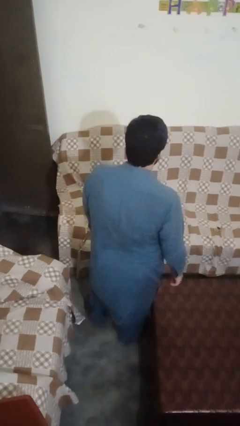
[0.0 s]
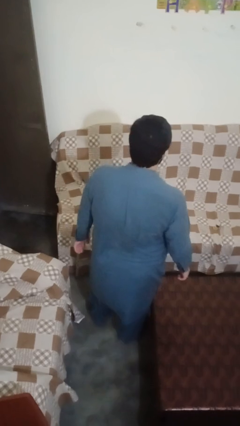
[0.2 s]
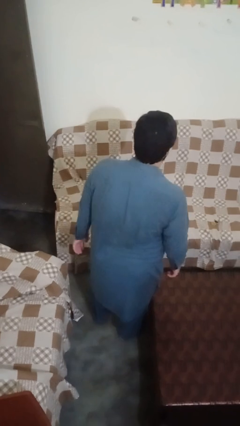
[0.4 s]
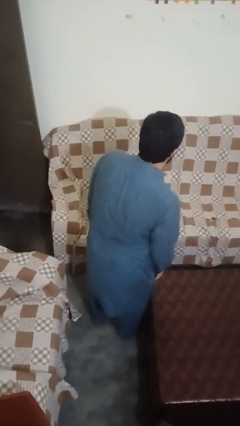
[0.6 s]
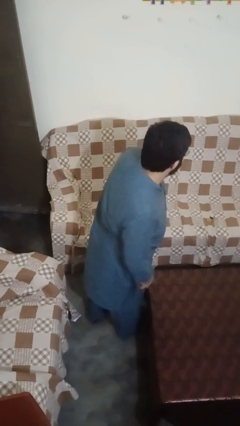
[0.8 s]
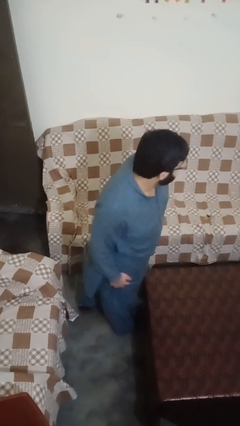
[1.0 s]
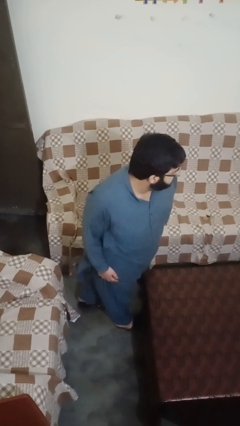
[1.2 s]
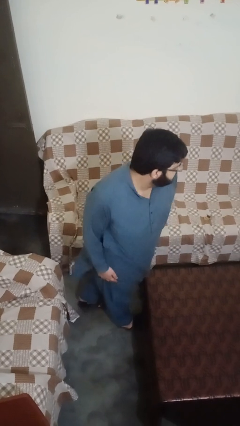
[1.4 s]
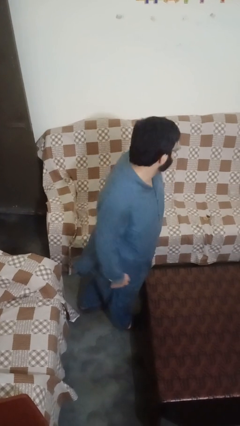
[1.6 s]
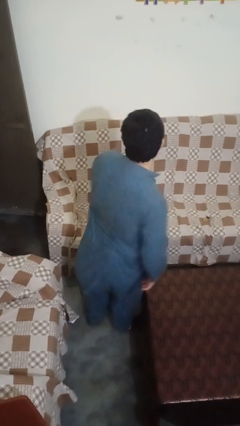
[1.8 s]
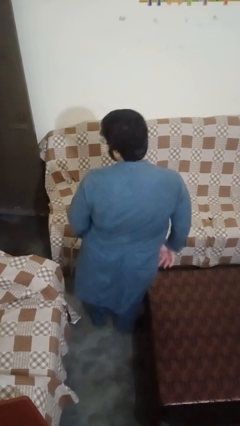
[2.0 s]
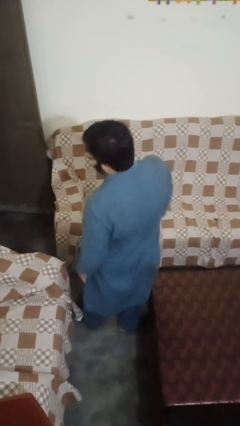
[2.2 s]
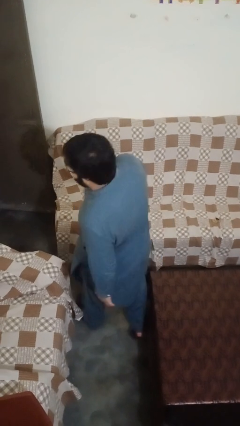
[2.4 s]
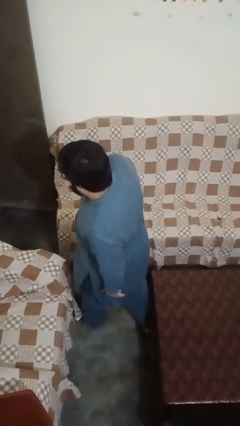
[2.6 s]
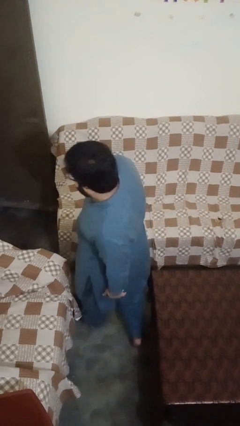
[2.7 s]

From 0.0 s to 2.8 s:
person twirls

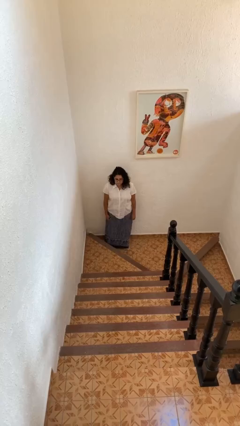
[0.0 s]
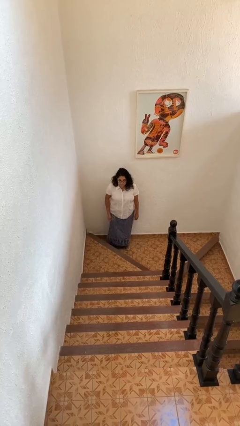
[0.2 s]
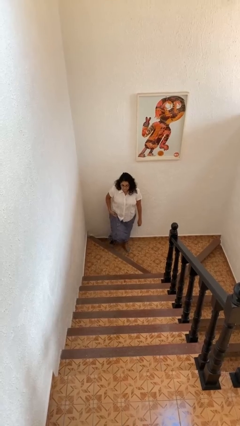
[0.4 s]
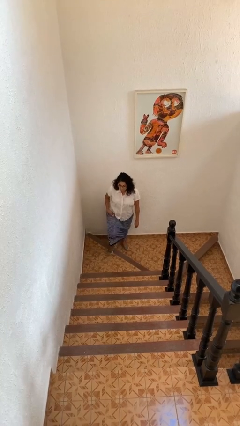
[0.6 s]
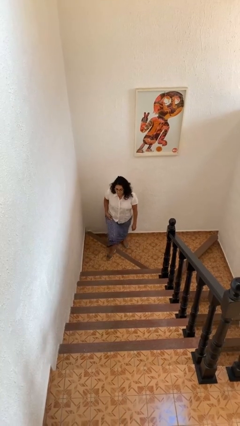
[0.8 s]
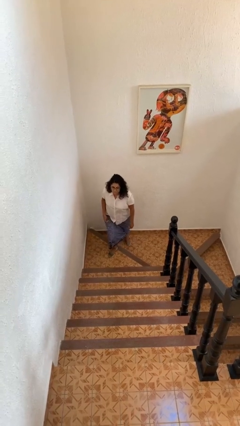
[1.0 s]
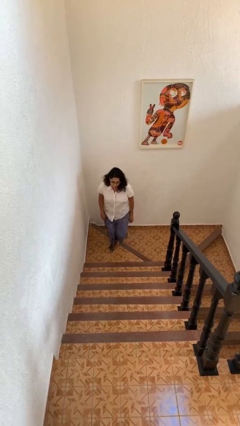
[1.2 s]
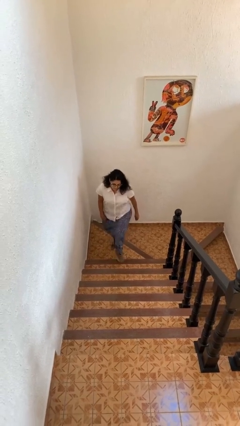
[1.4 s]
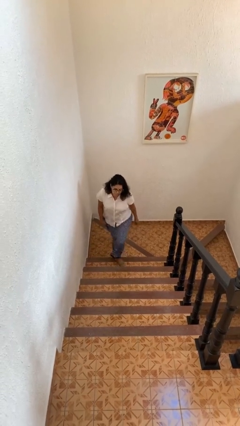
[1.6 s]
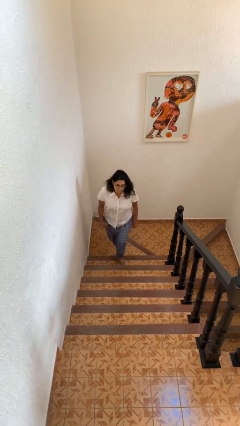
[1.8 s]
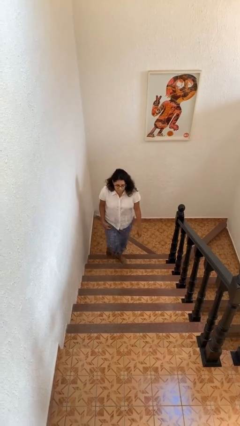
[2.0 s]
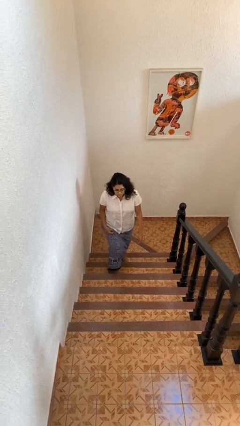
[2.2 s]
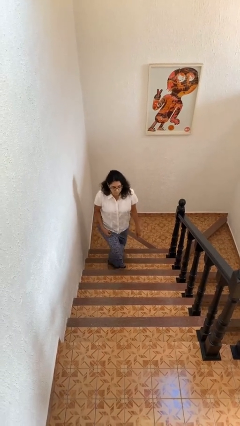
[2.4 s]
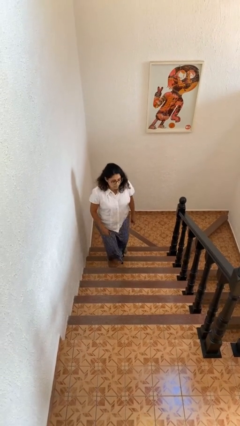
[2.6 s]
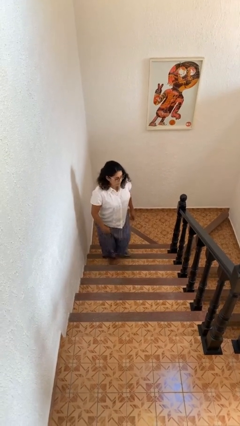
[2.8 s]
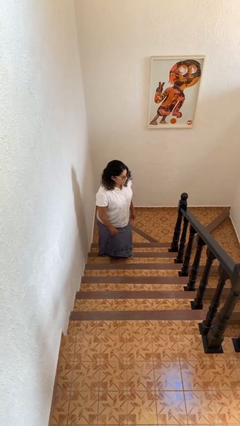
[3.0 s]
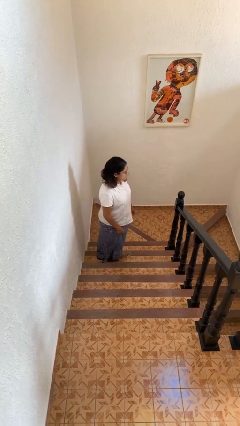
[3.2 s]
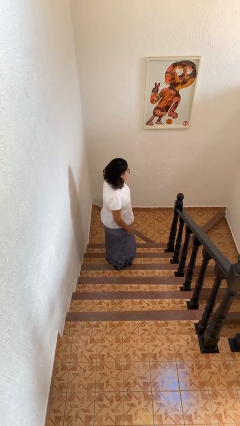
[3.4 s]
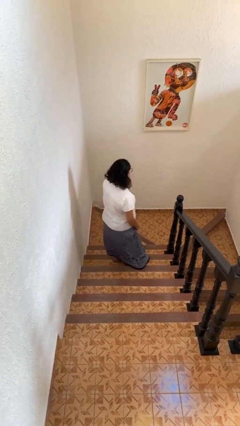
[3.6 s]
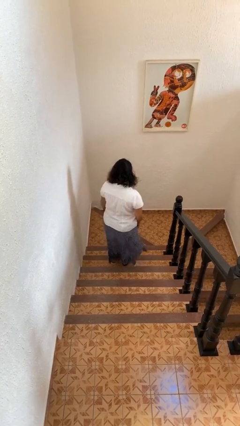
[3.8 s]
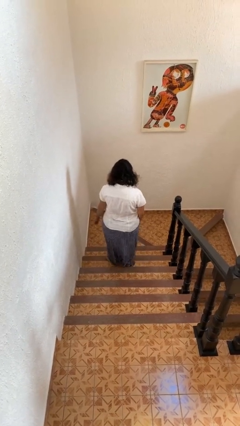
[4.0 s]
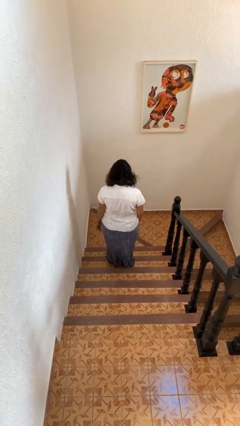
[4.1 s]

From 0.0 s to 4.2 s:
person climbs up stairs

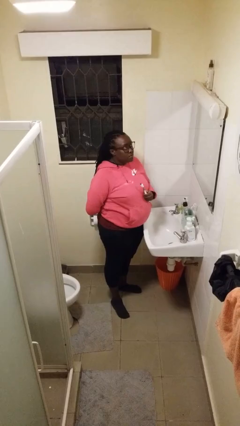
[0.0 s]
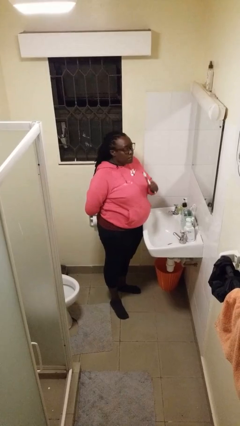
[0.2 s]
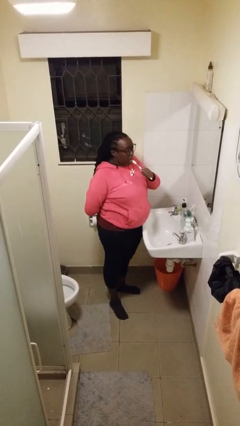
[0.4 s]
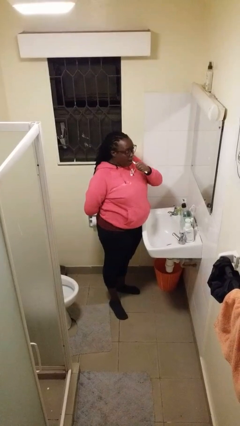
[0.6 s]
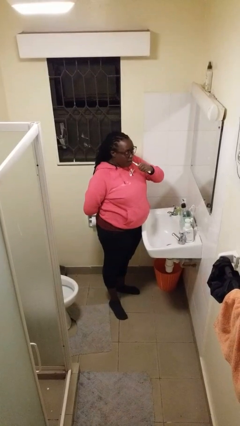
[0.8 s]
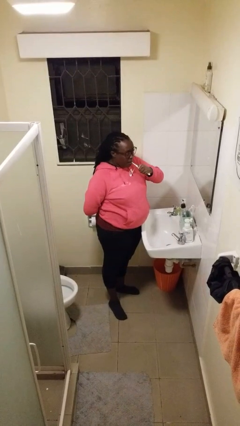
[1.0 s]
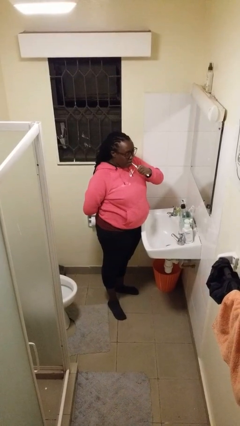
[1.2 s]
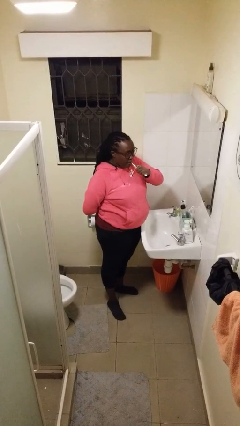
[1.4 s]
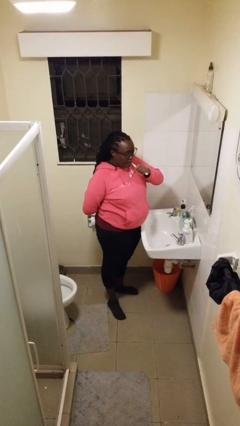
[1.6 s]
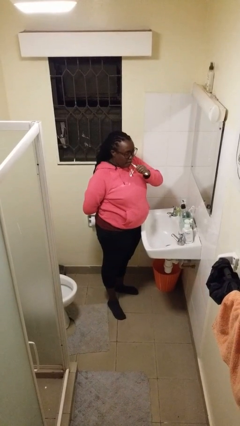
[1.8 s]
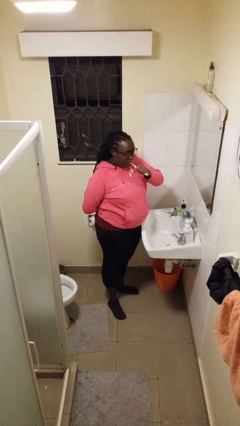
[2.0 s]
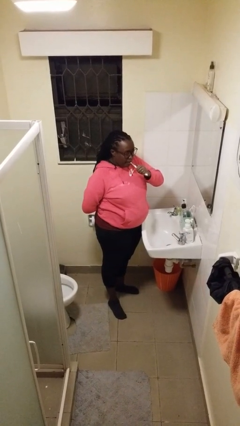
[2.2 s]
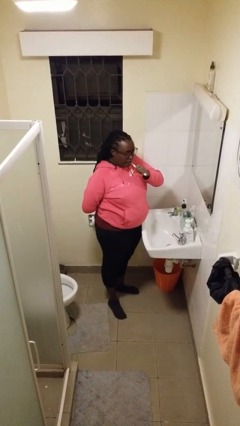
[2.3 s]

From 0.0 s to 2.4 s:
person brushes teeth

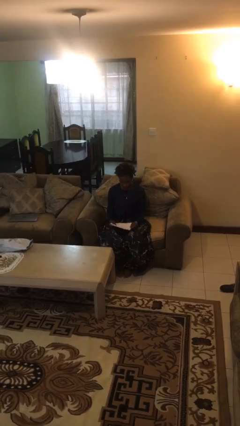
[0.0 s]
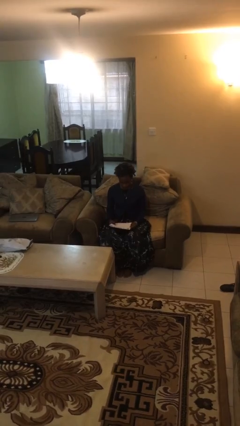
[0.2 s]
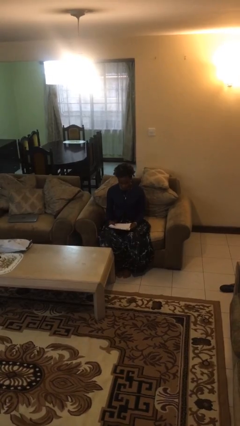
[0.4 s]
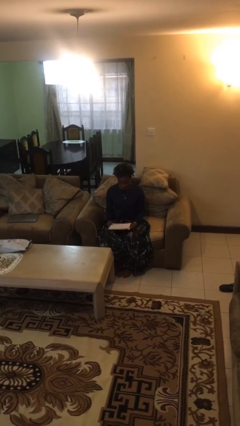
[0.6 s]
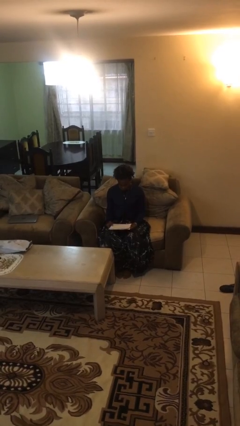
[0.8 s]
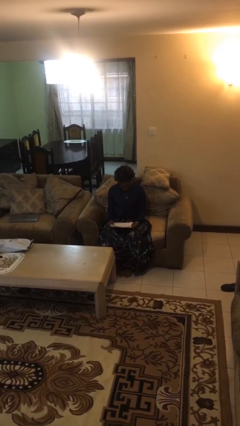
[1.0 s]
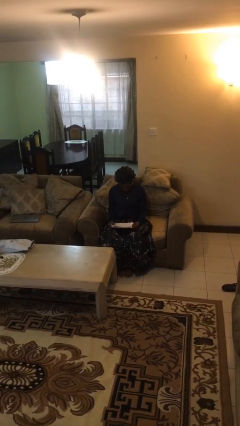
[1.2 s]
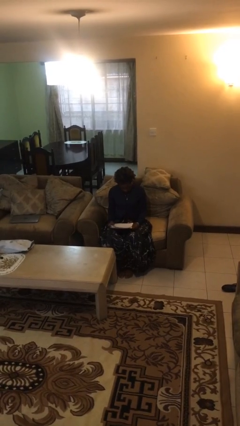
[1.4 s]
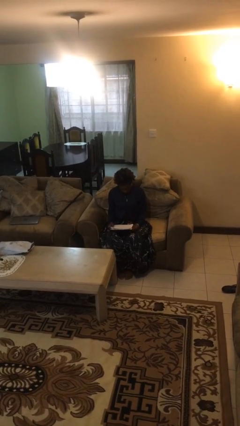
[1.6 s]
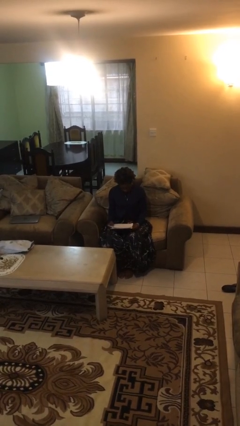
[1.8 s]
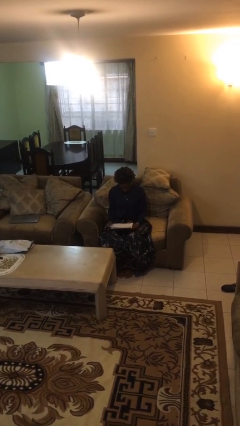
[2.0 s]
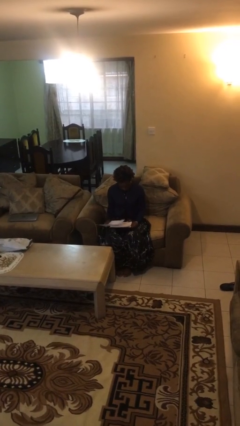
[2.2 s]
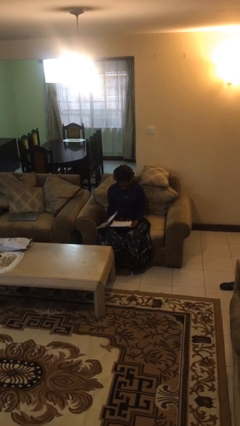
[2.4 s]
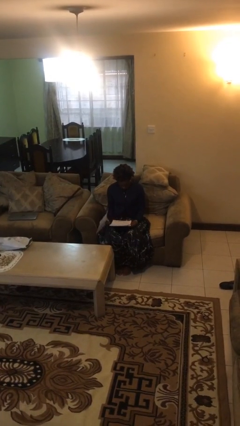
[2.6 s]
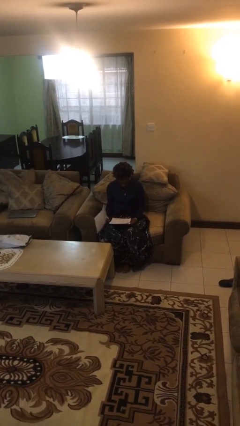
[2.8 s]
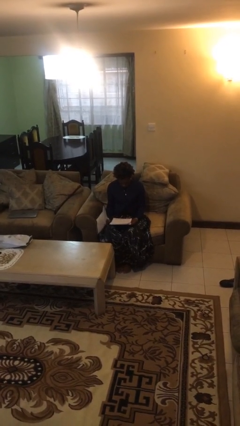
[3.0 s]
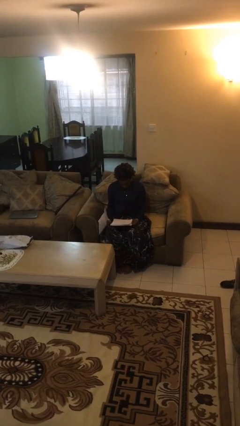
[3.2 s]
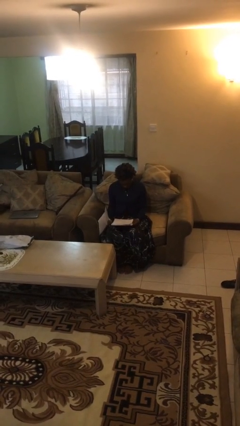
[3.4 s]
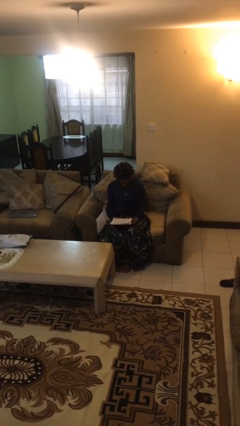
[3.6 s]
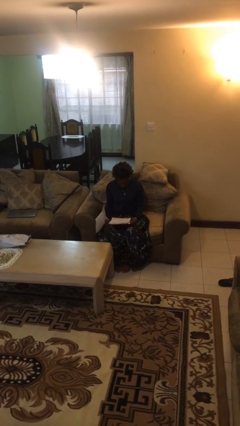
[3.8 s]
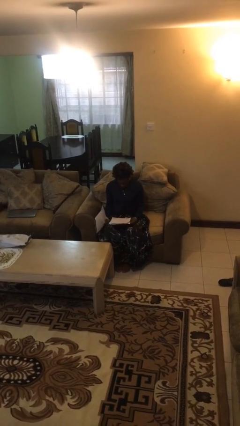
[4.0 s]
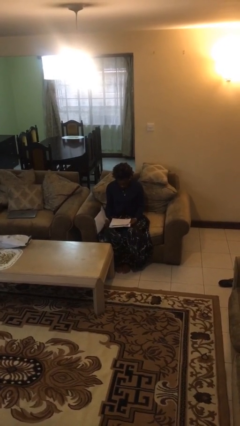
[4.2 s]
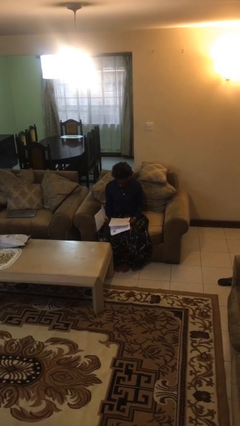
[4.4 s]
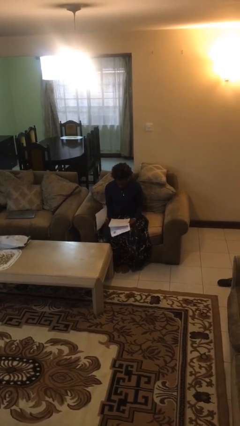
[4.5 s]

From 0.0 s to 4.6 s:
person reads document

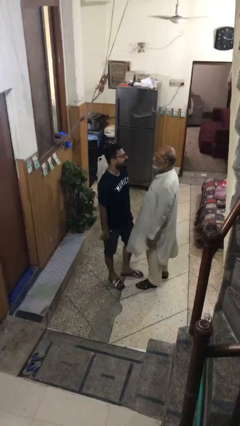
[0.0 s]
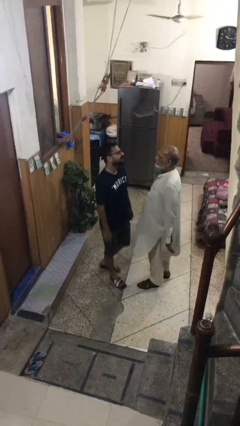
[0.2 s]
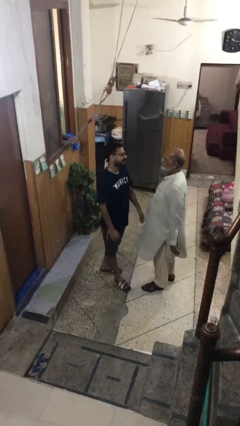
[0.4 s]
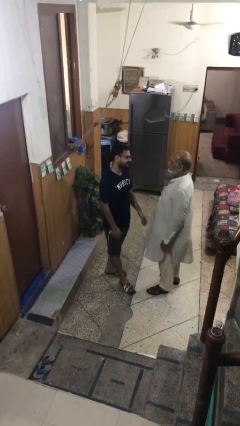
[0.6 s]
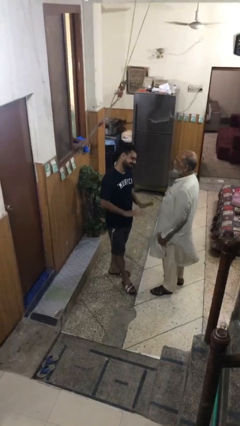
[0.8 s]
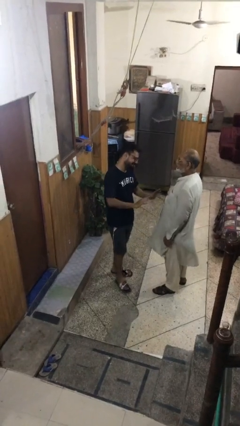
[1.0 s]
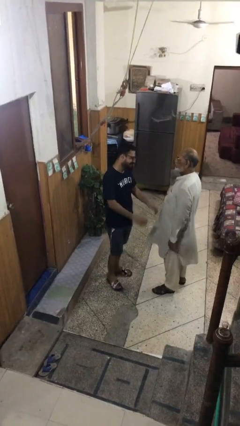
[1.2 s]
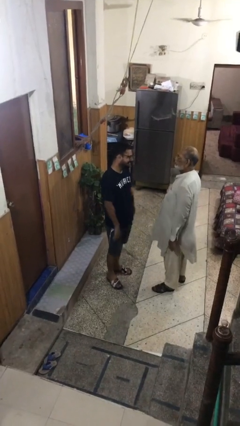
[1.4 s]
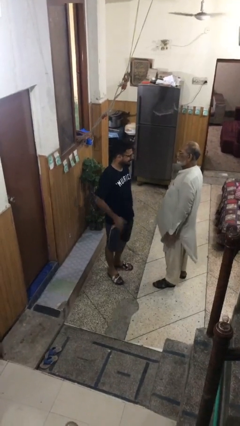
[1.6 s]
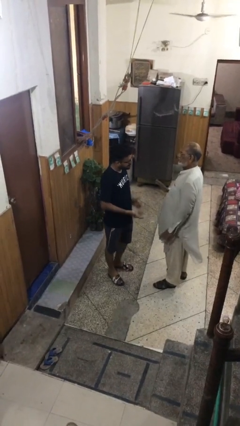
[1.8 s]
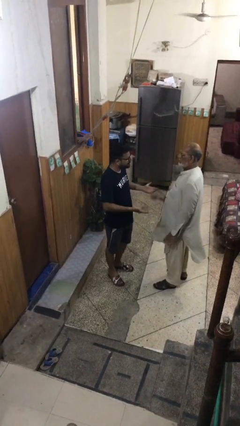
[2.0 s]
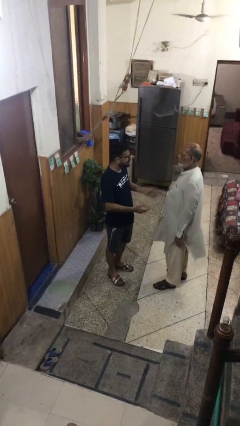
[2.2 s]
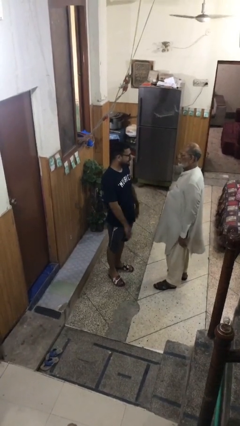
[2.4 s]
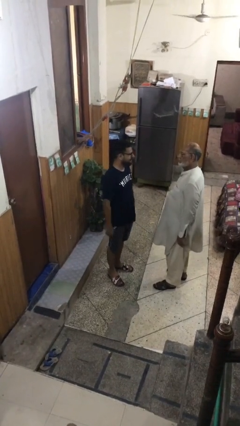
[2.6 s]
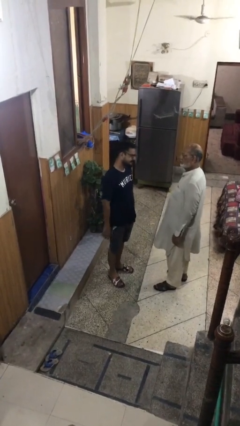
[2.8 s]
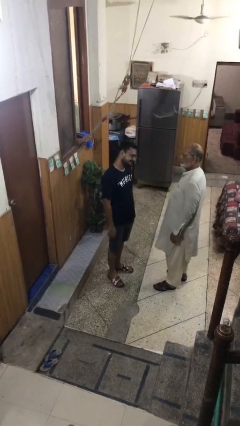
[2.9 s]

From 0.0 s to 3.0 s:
person talks to person

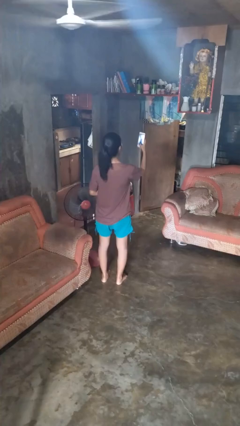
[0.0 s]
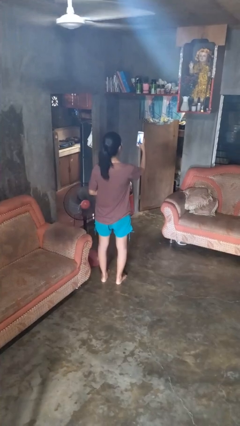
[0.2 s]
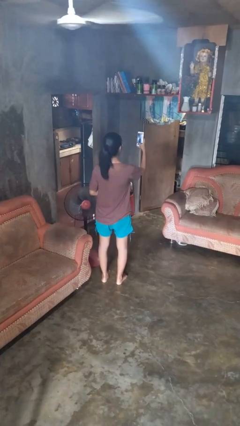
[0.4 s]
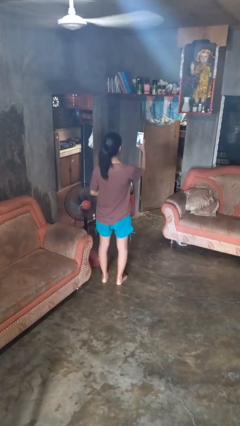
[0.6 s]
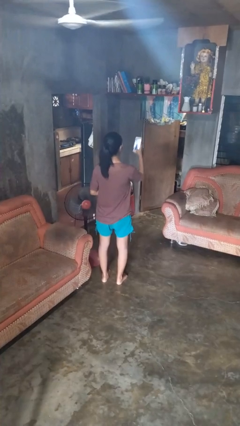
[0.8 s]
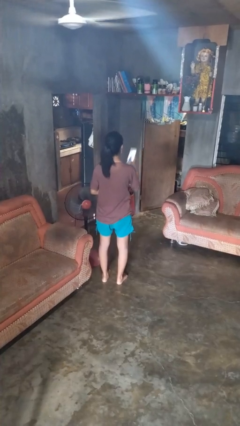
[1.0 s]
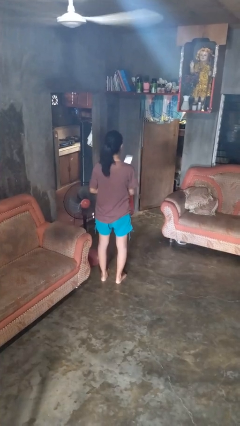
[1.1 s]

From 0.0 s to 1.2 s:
person takes selfie
